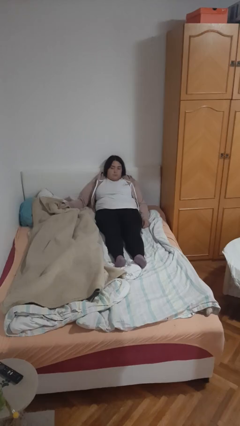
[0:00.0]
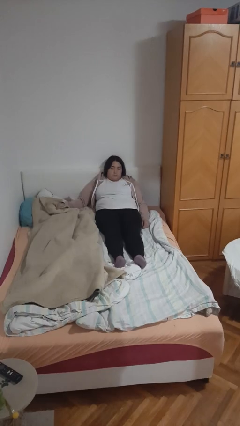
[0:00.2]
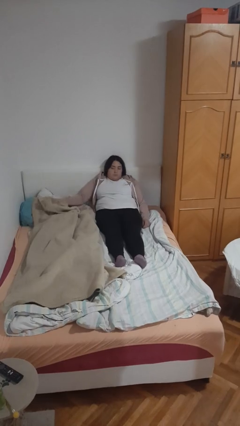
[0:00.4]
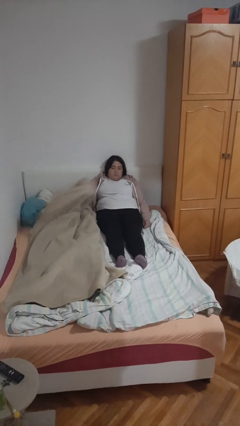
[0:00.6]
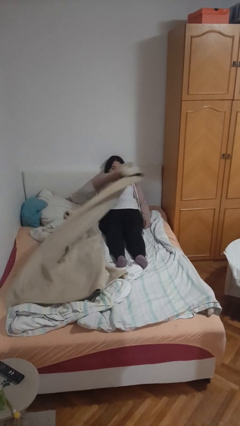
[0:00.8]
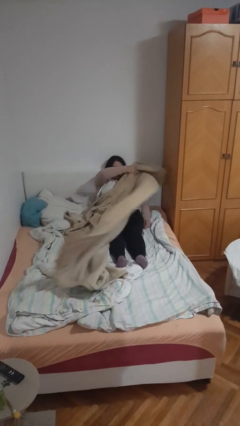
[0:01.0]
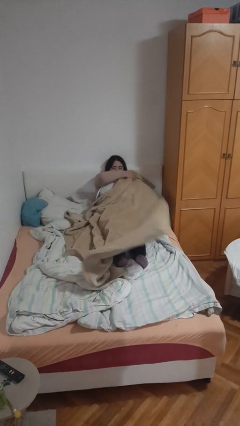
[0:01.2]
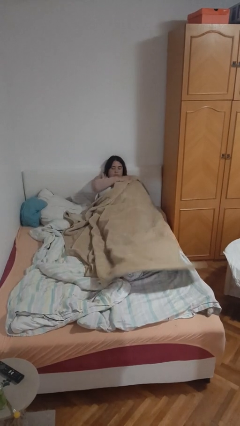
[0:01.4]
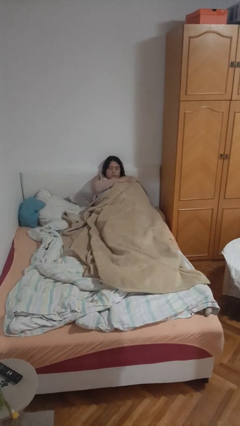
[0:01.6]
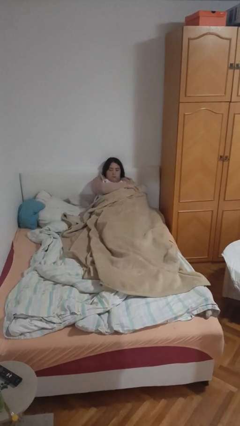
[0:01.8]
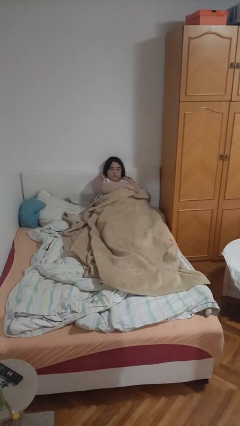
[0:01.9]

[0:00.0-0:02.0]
person covers with blanket

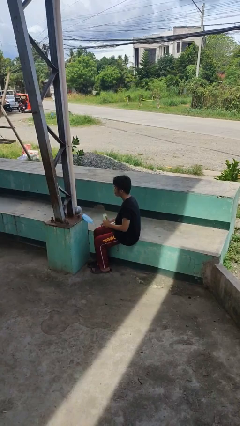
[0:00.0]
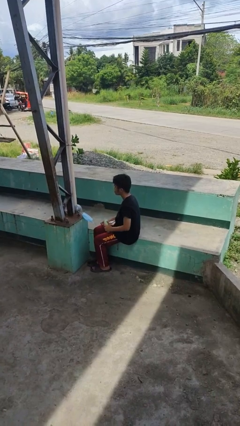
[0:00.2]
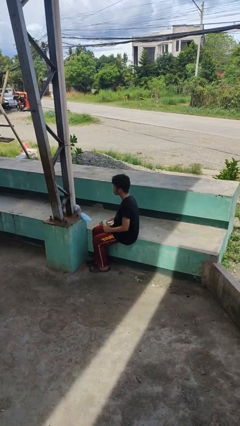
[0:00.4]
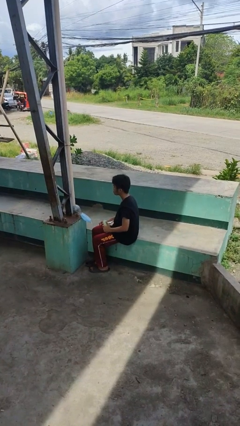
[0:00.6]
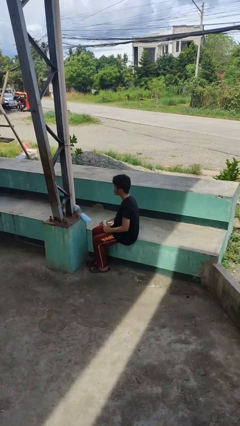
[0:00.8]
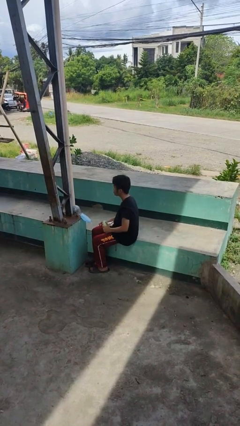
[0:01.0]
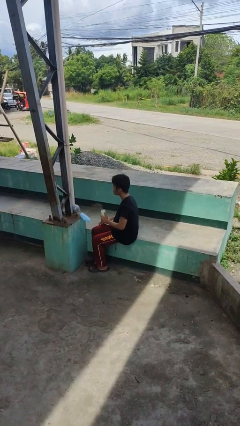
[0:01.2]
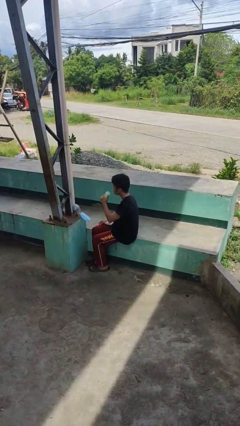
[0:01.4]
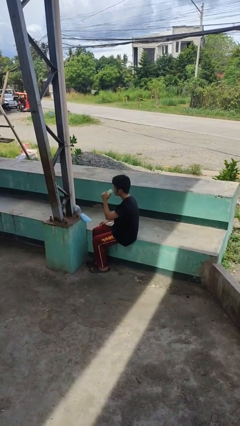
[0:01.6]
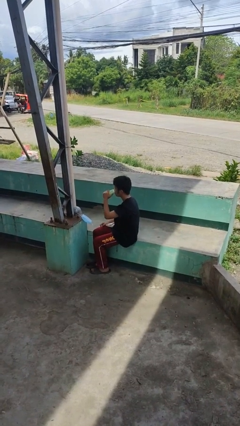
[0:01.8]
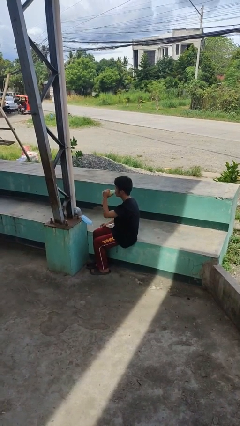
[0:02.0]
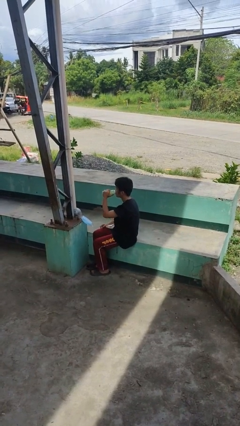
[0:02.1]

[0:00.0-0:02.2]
person interacts with tablet

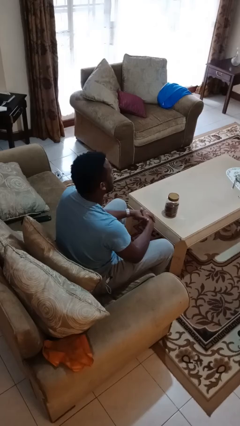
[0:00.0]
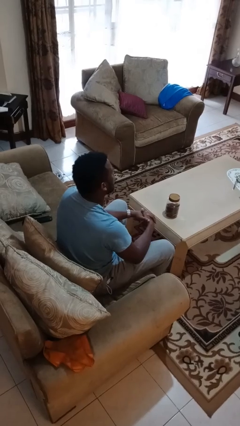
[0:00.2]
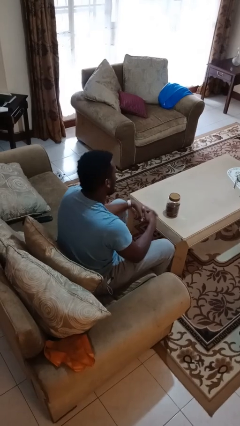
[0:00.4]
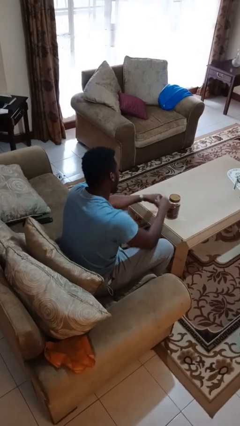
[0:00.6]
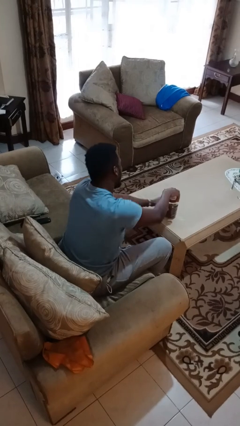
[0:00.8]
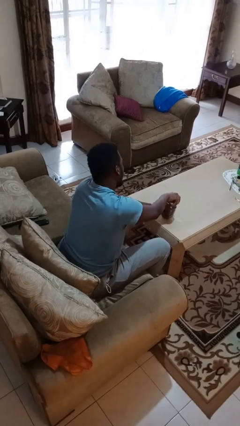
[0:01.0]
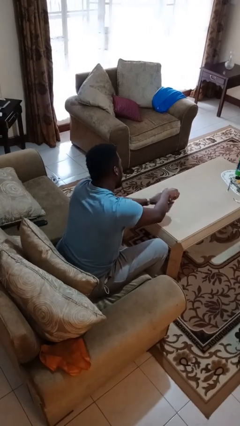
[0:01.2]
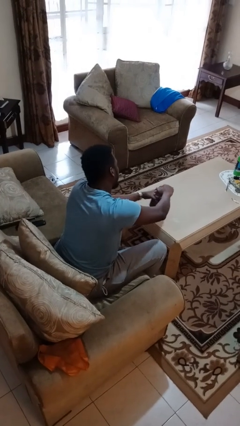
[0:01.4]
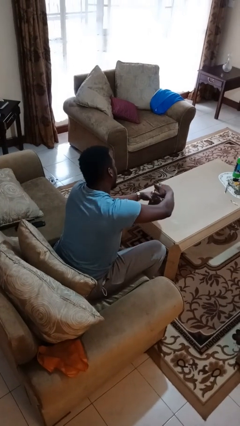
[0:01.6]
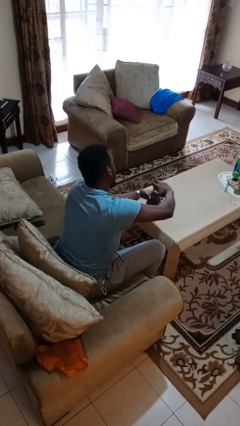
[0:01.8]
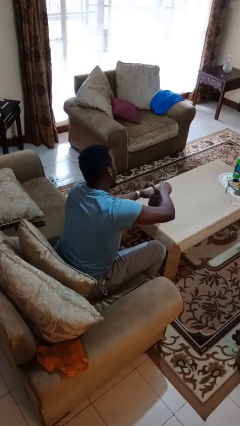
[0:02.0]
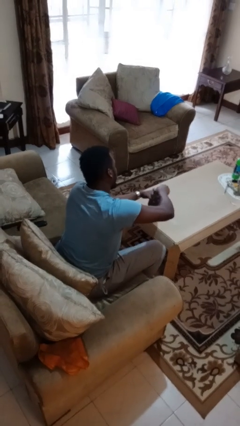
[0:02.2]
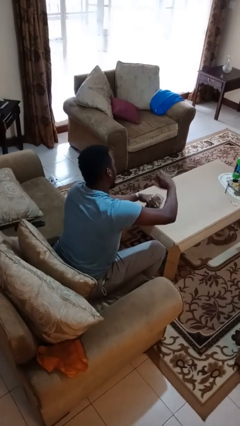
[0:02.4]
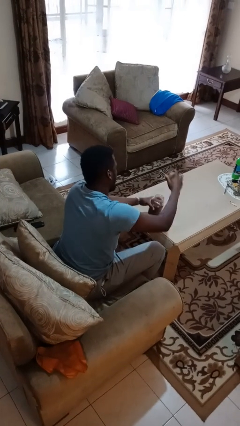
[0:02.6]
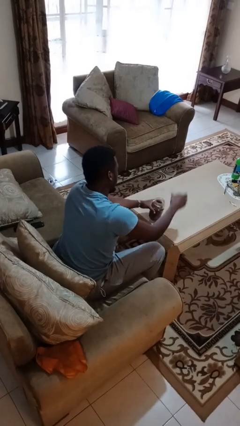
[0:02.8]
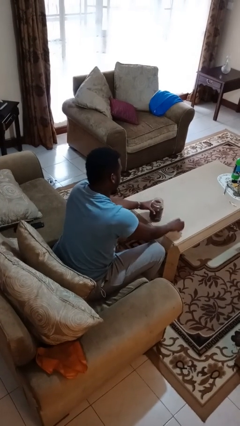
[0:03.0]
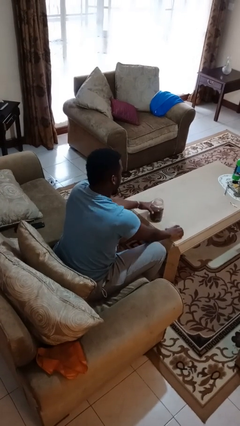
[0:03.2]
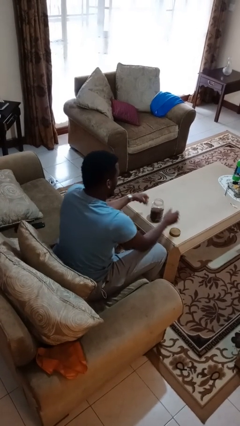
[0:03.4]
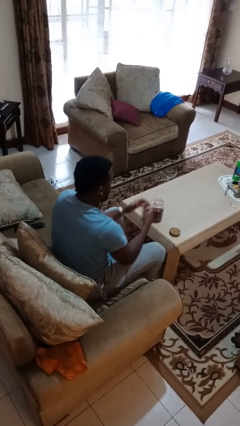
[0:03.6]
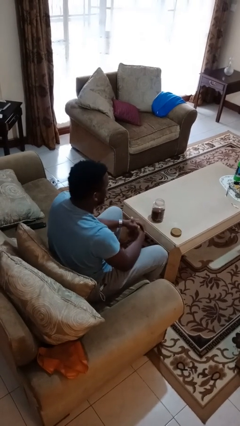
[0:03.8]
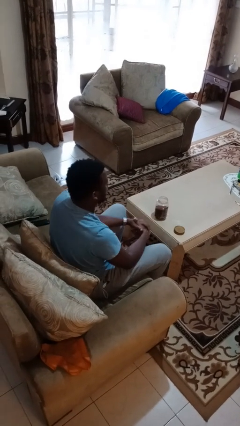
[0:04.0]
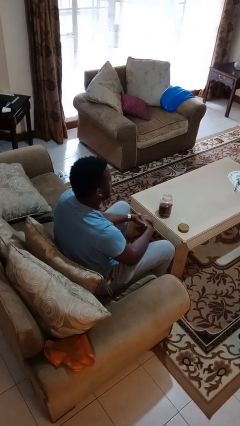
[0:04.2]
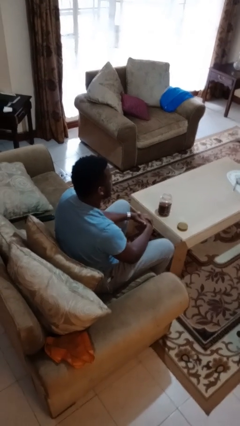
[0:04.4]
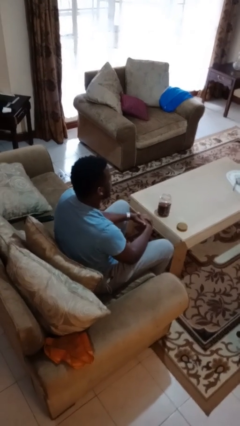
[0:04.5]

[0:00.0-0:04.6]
person opens jar

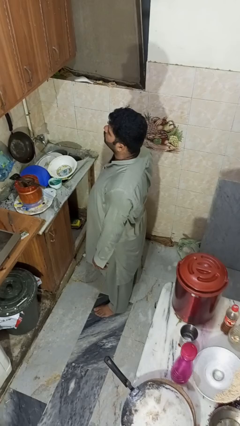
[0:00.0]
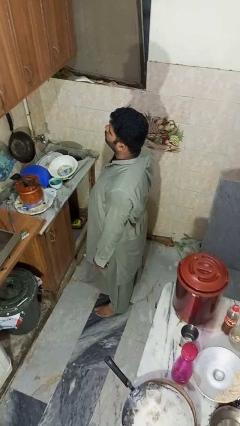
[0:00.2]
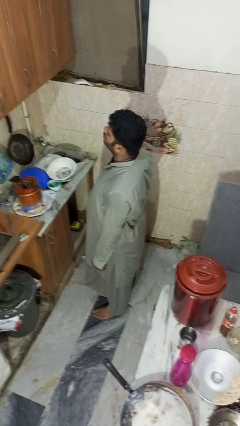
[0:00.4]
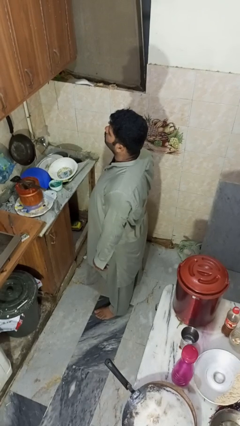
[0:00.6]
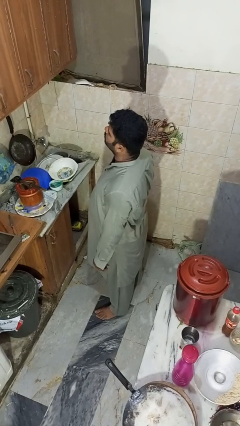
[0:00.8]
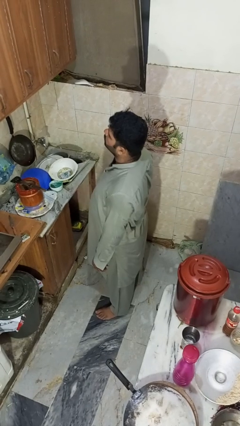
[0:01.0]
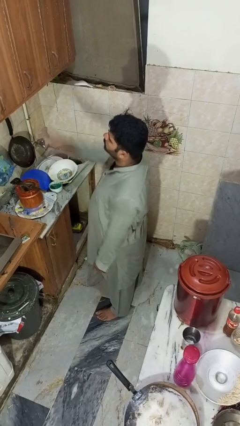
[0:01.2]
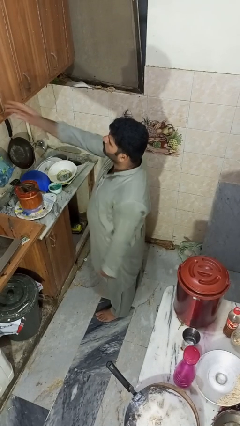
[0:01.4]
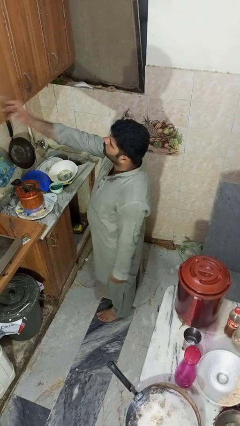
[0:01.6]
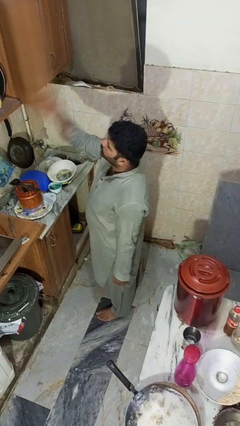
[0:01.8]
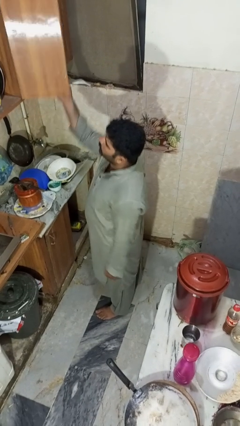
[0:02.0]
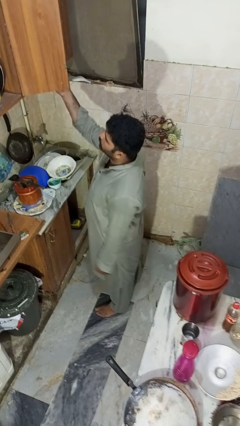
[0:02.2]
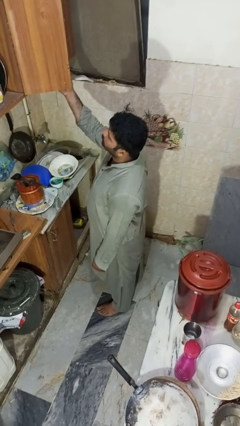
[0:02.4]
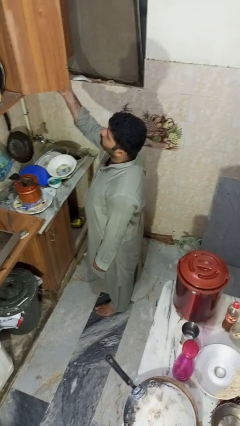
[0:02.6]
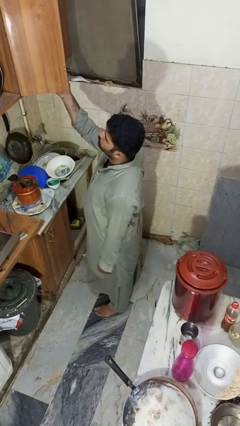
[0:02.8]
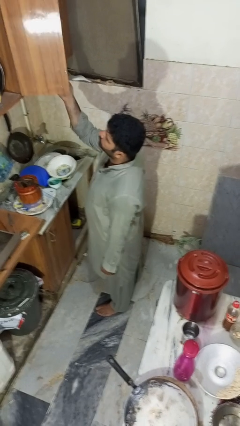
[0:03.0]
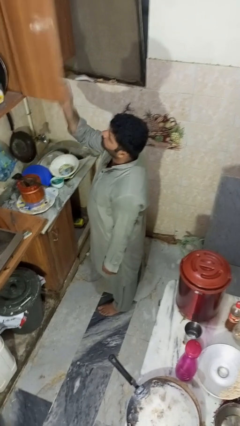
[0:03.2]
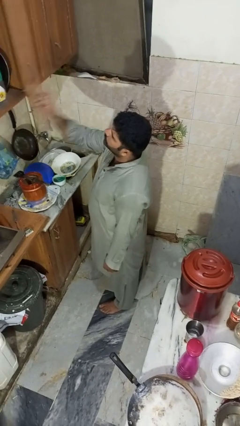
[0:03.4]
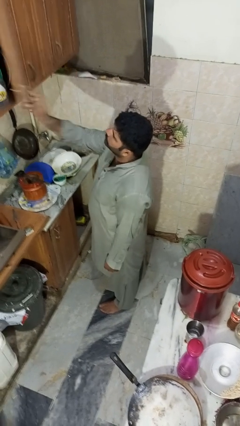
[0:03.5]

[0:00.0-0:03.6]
person opens cabinet

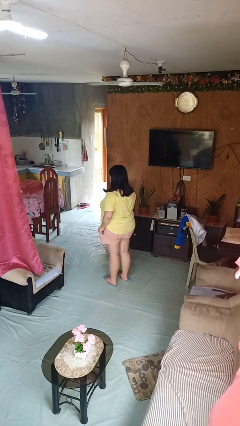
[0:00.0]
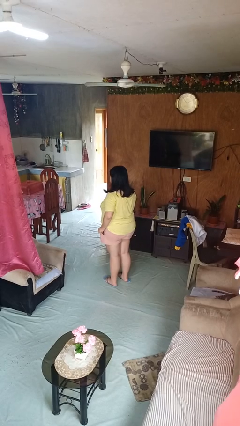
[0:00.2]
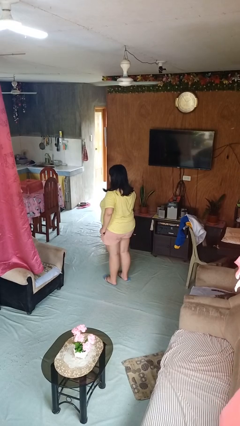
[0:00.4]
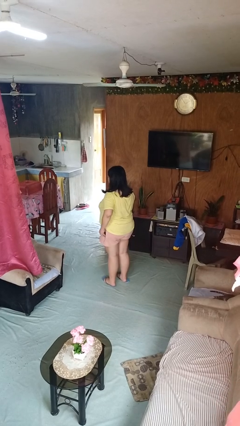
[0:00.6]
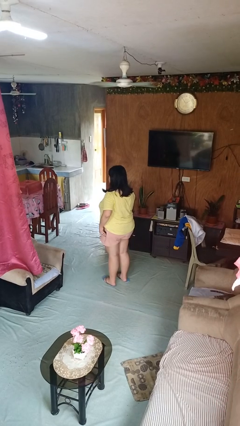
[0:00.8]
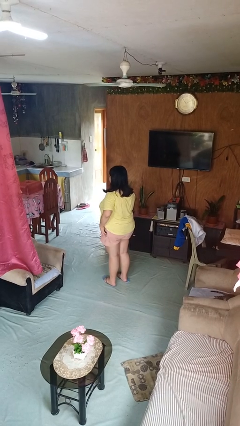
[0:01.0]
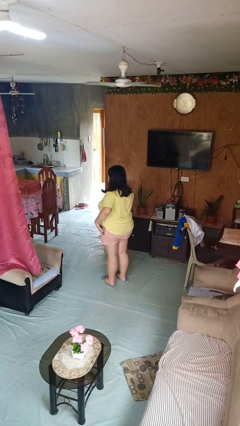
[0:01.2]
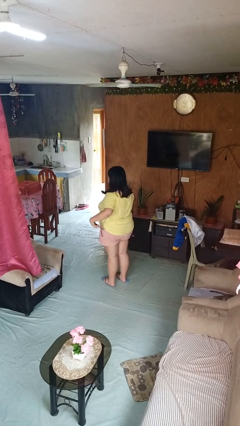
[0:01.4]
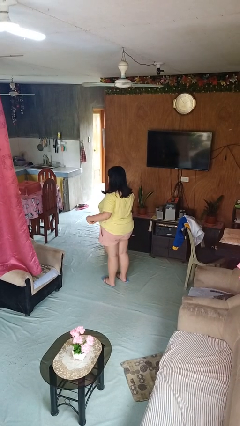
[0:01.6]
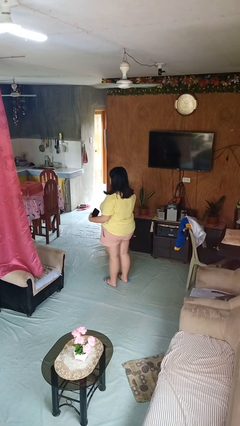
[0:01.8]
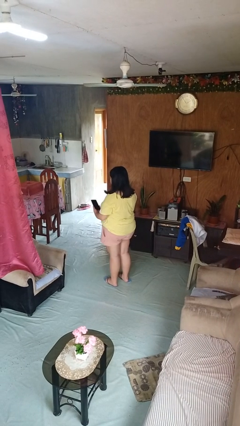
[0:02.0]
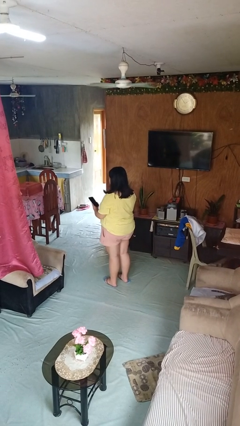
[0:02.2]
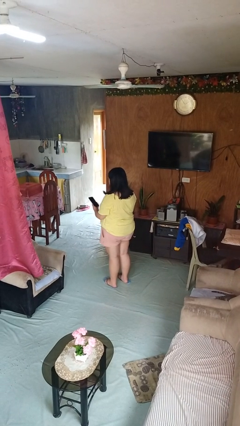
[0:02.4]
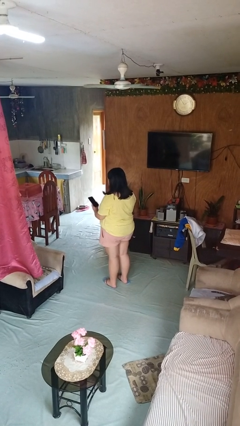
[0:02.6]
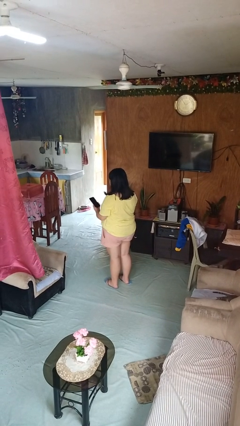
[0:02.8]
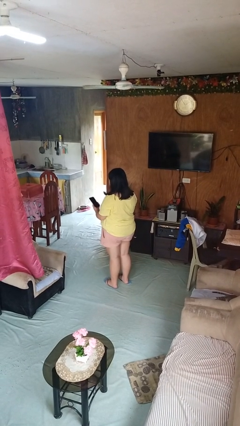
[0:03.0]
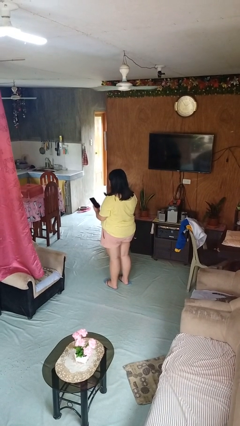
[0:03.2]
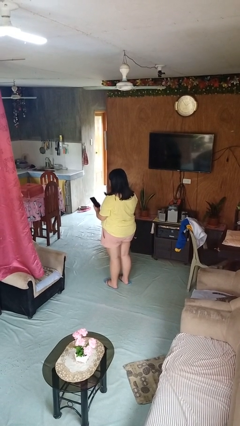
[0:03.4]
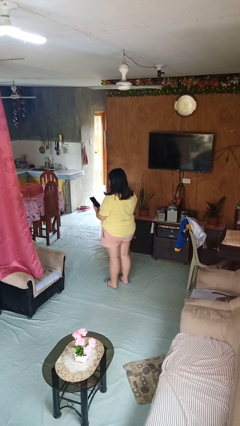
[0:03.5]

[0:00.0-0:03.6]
person takes phone from pocket

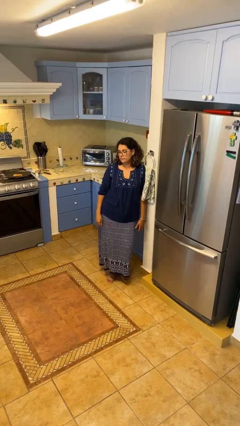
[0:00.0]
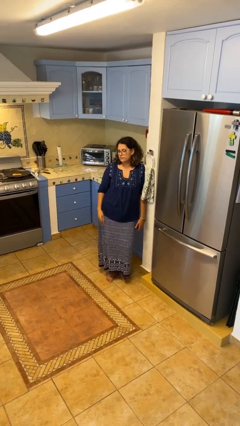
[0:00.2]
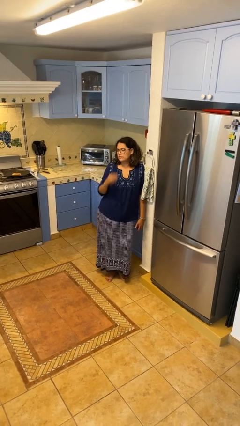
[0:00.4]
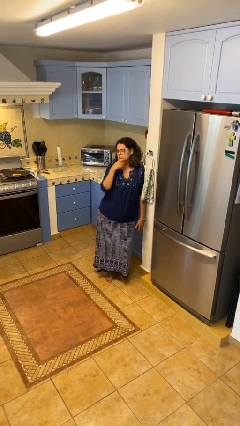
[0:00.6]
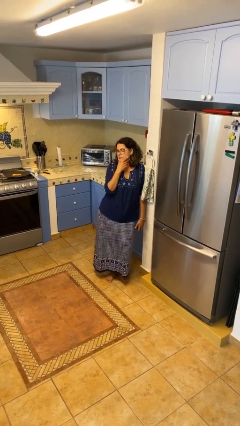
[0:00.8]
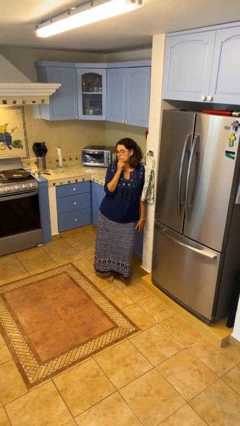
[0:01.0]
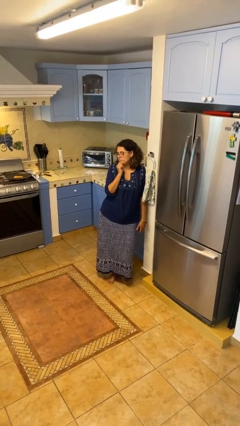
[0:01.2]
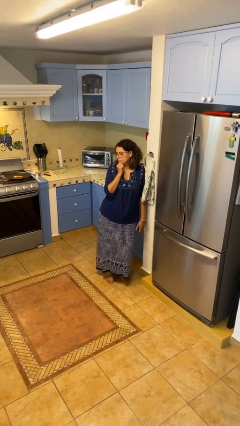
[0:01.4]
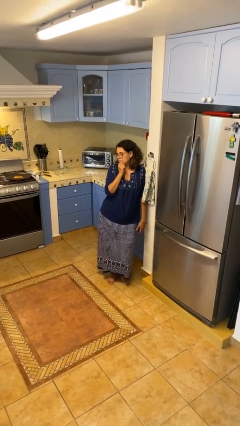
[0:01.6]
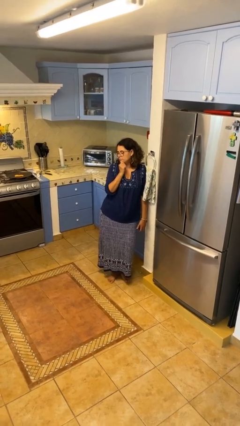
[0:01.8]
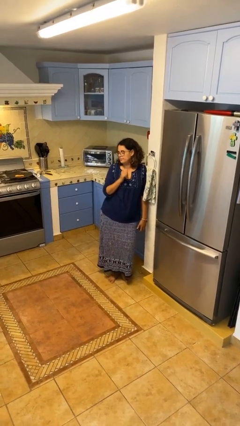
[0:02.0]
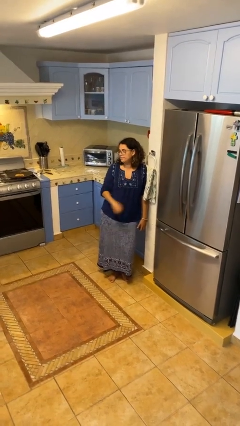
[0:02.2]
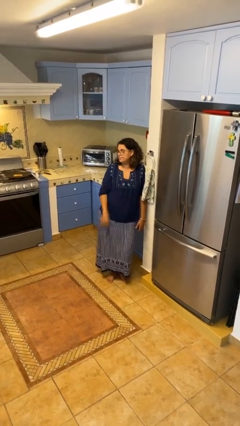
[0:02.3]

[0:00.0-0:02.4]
person strokes chin
